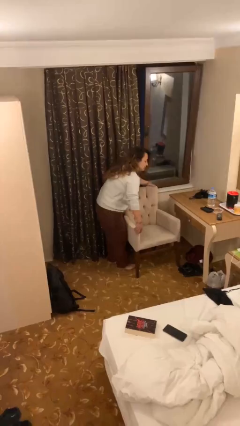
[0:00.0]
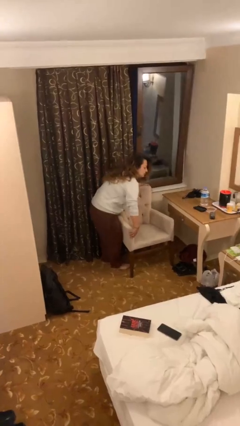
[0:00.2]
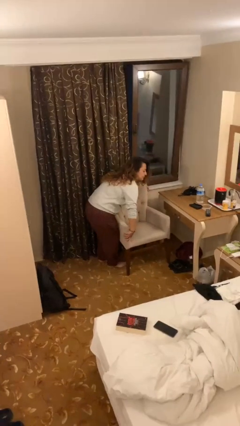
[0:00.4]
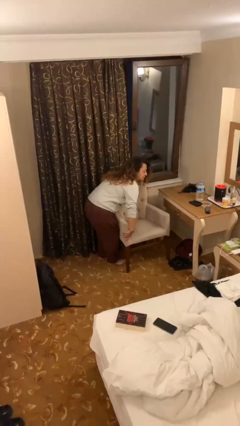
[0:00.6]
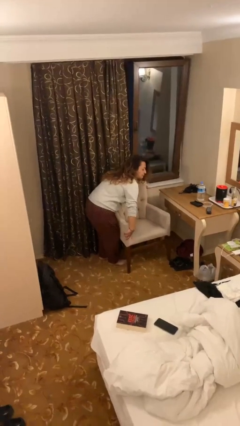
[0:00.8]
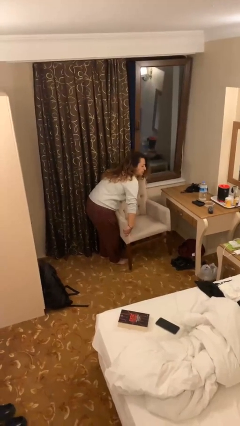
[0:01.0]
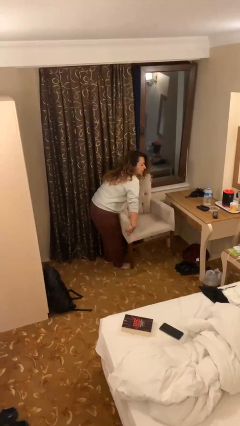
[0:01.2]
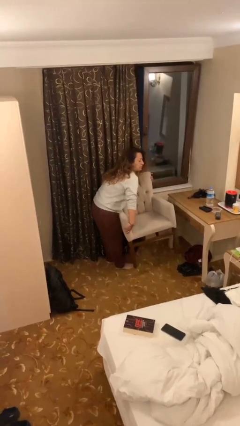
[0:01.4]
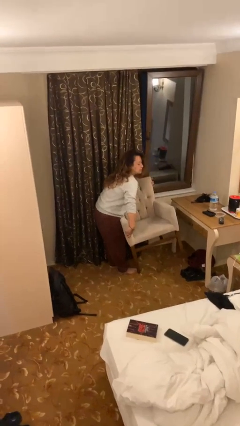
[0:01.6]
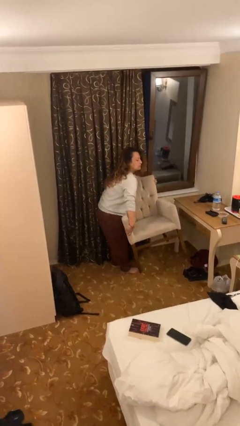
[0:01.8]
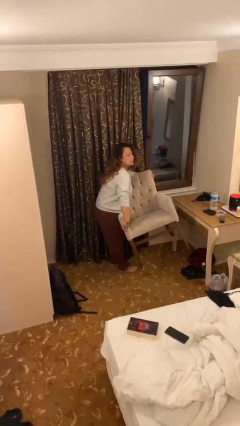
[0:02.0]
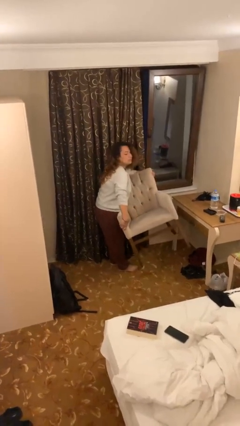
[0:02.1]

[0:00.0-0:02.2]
person picks up object from floor

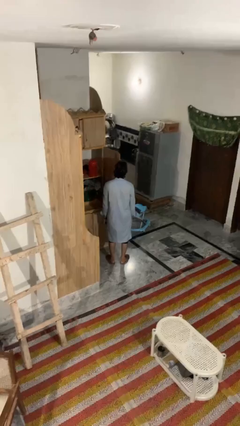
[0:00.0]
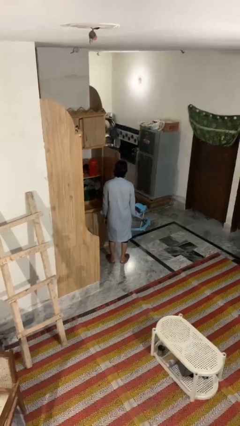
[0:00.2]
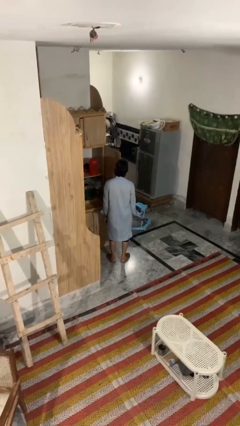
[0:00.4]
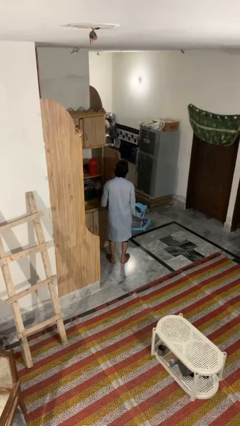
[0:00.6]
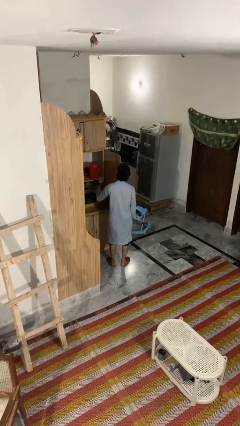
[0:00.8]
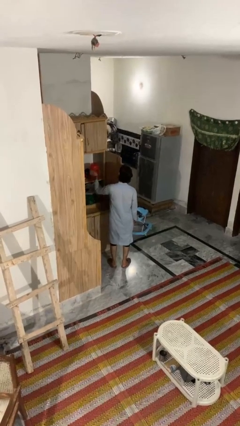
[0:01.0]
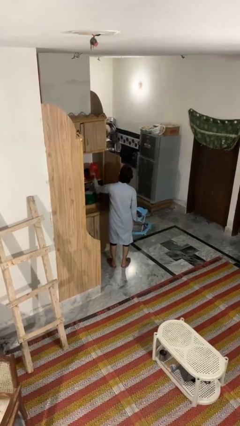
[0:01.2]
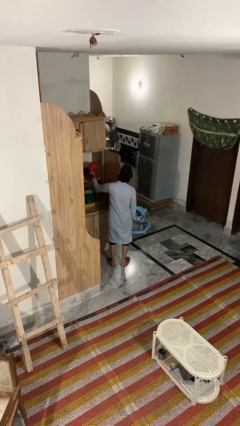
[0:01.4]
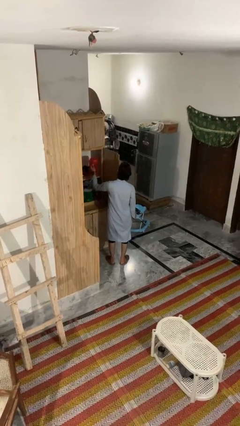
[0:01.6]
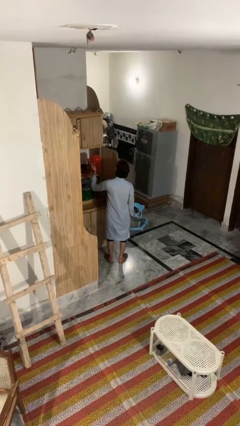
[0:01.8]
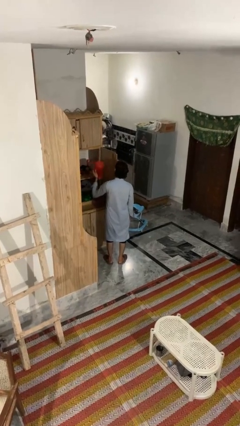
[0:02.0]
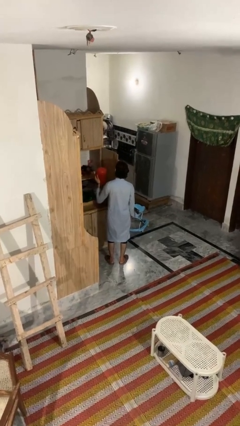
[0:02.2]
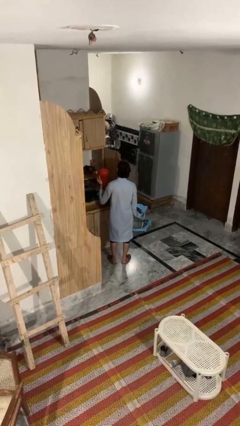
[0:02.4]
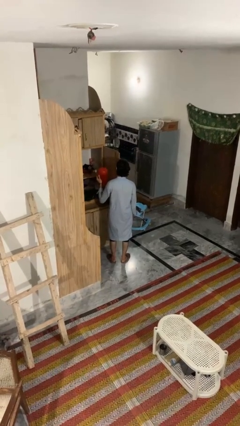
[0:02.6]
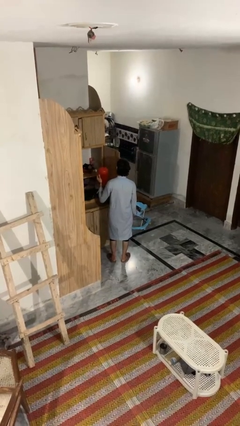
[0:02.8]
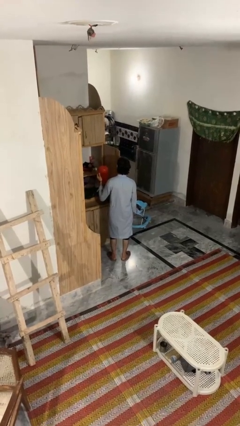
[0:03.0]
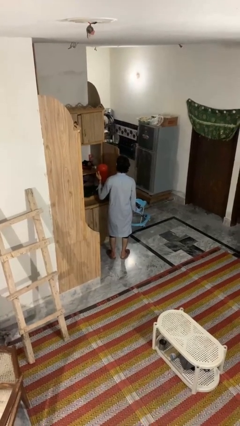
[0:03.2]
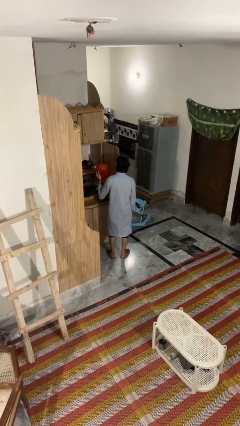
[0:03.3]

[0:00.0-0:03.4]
person picks up object from cabinet

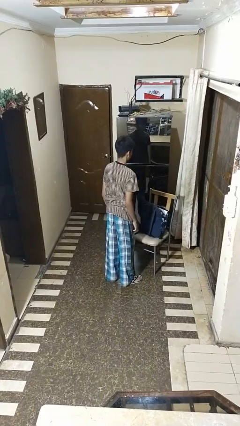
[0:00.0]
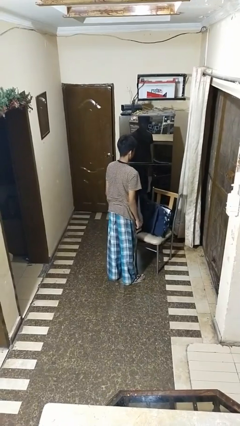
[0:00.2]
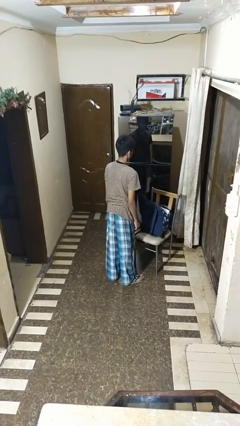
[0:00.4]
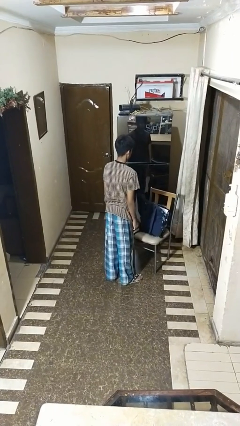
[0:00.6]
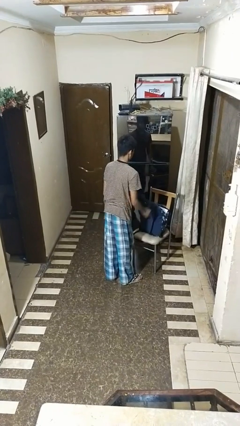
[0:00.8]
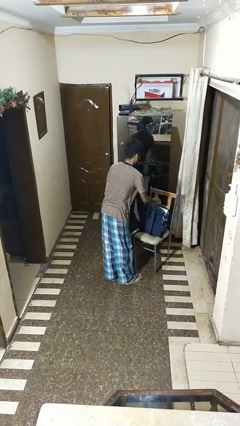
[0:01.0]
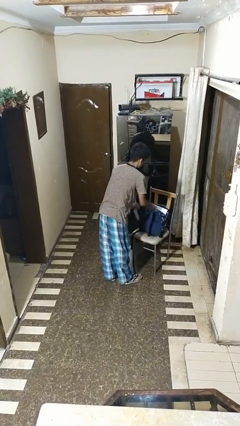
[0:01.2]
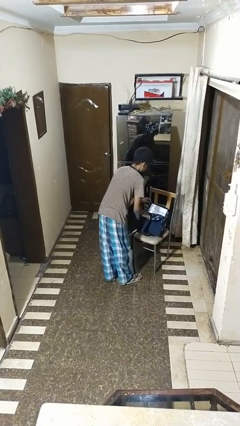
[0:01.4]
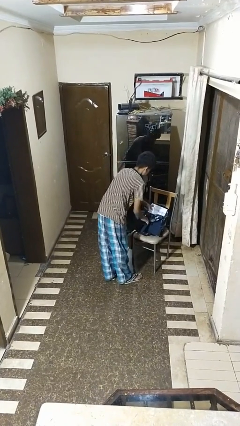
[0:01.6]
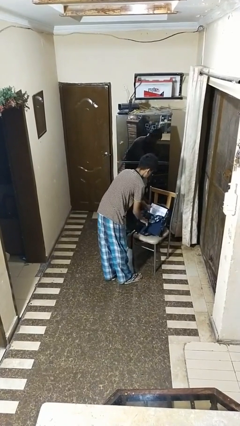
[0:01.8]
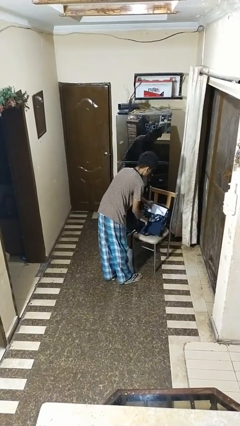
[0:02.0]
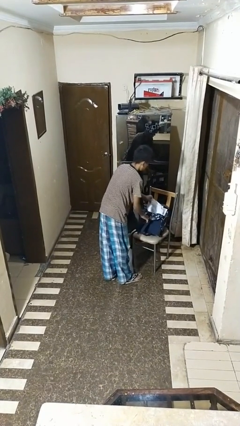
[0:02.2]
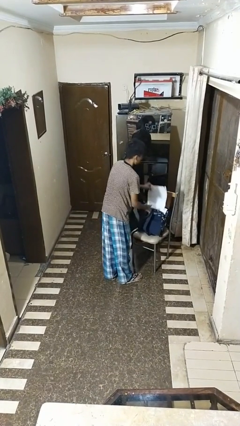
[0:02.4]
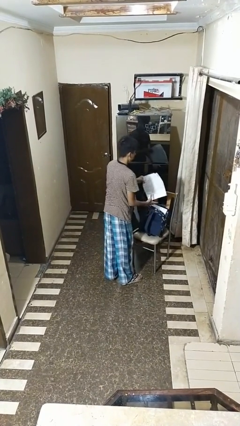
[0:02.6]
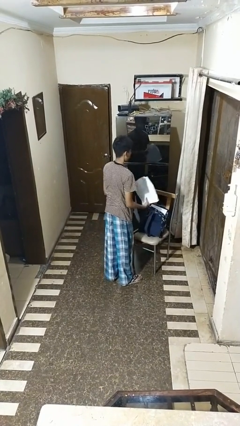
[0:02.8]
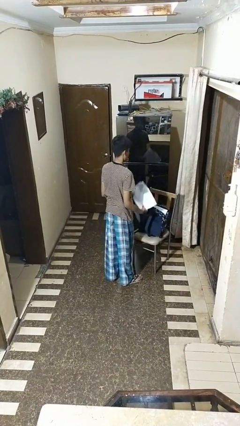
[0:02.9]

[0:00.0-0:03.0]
person takes object from bag

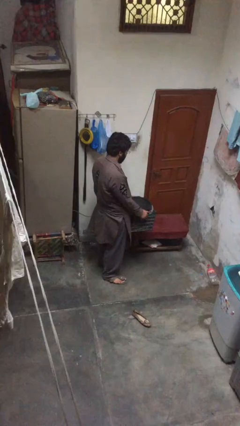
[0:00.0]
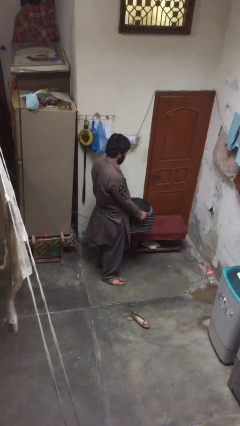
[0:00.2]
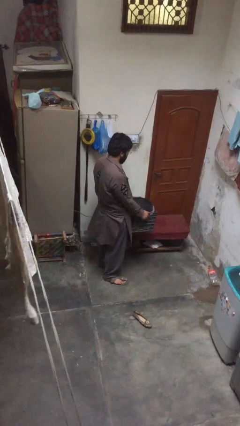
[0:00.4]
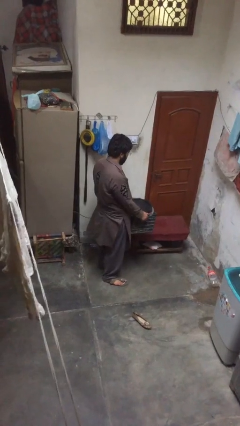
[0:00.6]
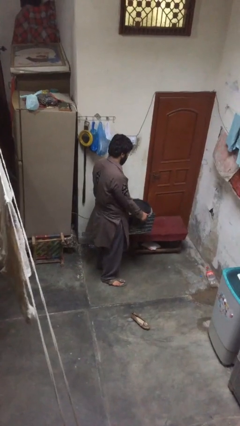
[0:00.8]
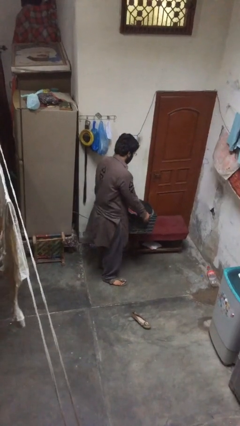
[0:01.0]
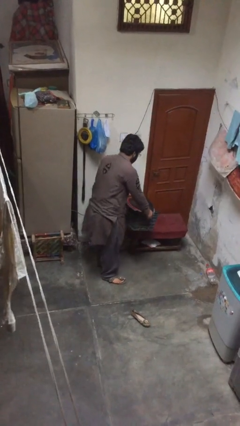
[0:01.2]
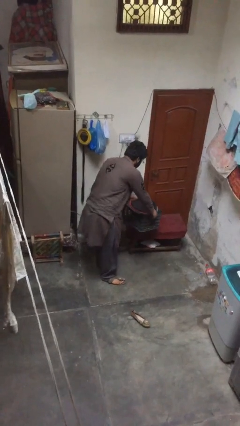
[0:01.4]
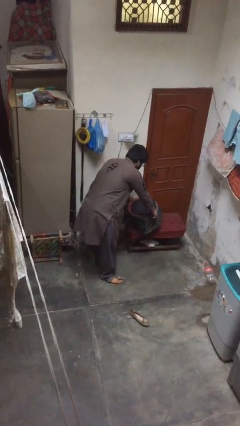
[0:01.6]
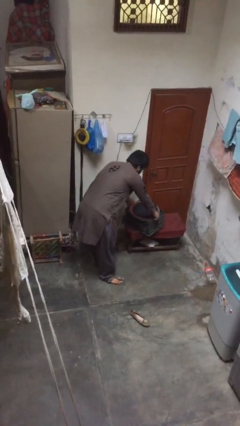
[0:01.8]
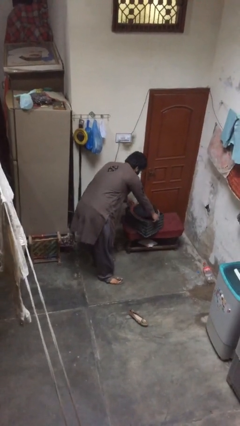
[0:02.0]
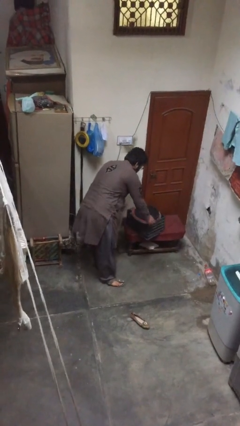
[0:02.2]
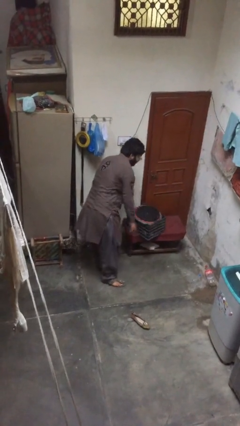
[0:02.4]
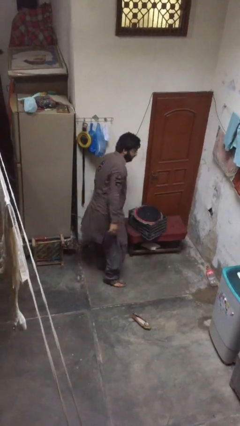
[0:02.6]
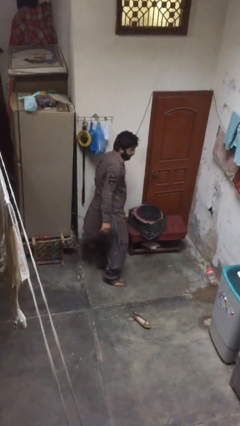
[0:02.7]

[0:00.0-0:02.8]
person puts down object on table

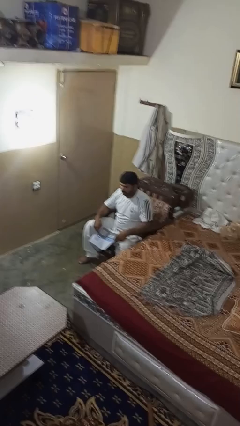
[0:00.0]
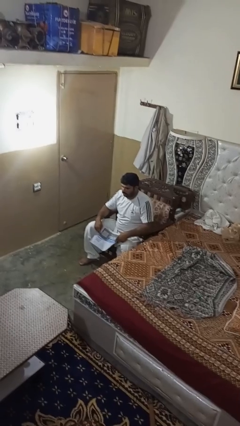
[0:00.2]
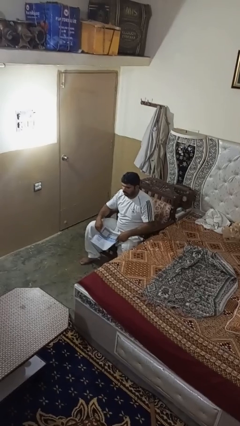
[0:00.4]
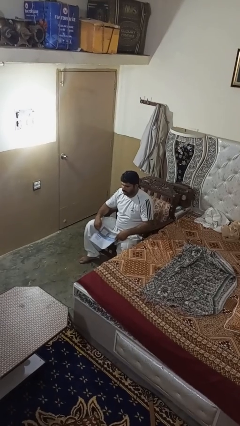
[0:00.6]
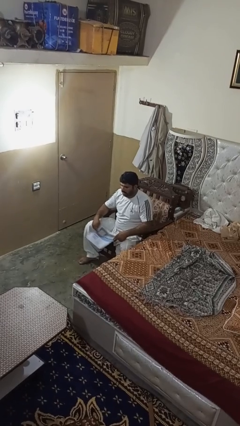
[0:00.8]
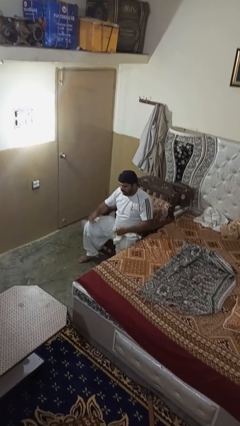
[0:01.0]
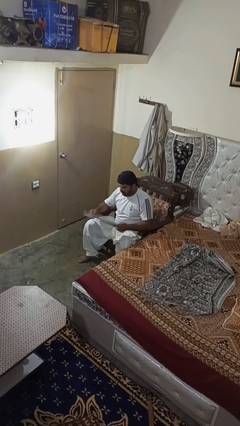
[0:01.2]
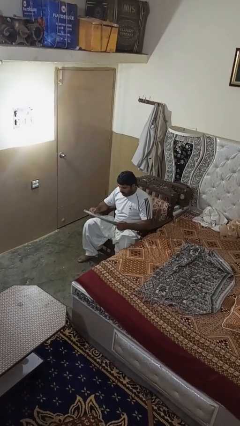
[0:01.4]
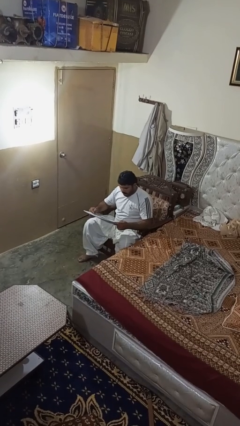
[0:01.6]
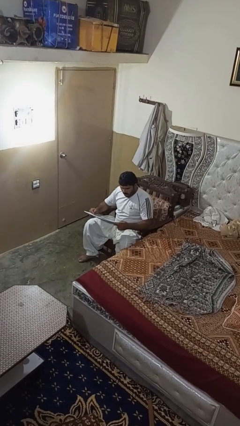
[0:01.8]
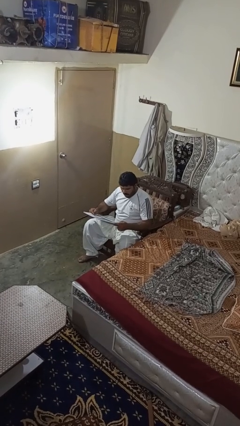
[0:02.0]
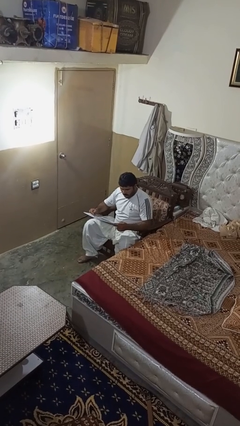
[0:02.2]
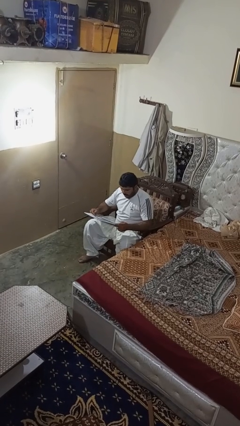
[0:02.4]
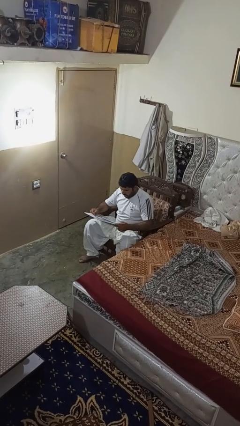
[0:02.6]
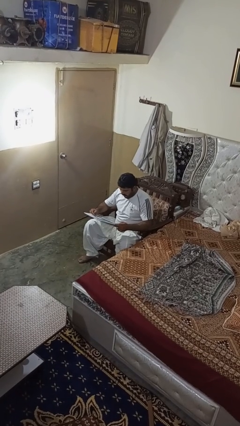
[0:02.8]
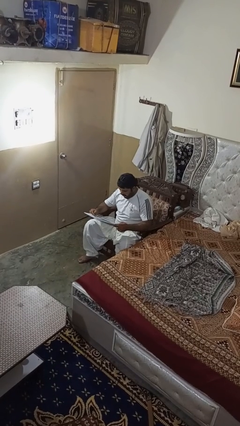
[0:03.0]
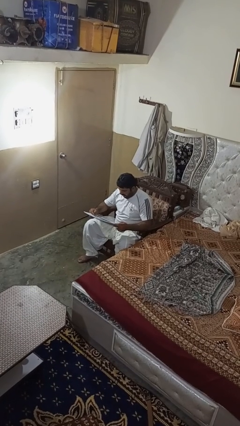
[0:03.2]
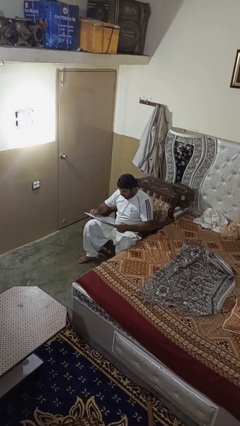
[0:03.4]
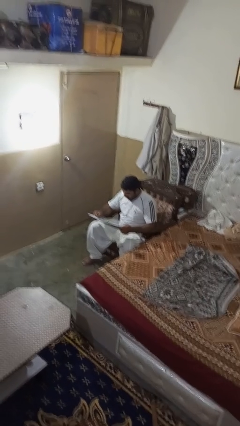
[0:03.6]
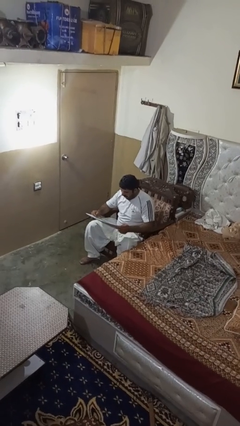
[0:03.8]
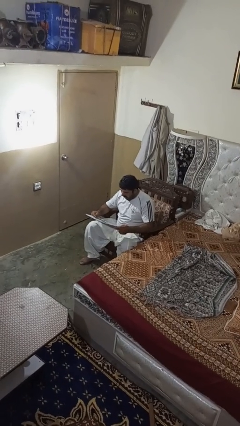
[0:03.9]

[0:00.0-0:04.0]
person reads newspaper

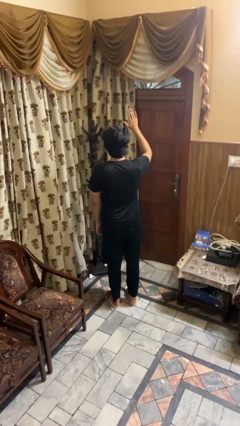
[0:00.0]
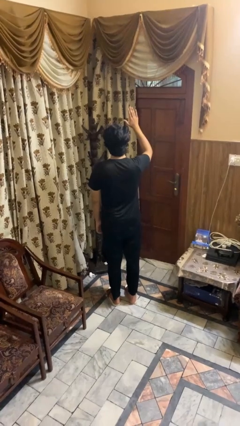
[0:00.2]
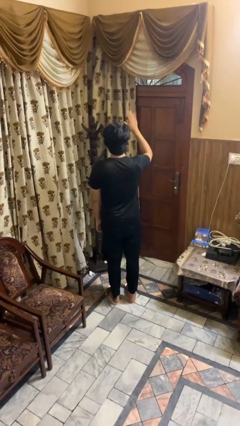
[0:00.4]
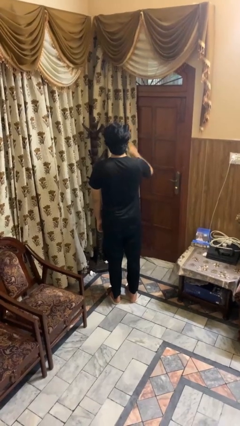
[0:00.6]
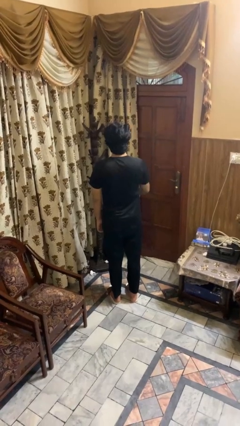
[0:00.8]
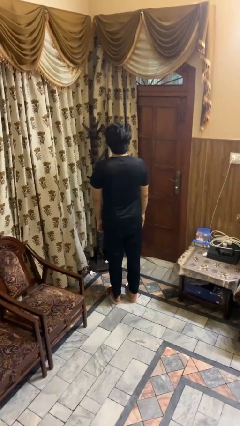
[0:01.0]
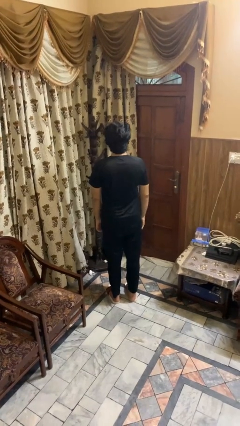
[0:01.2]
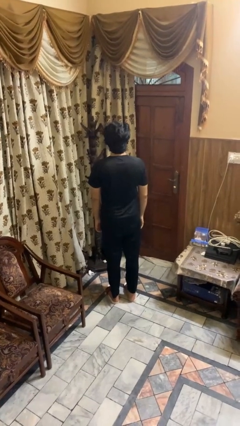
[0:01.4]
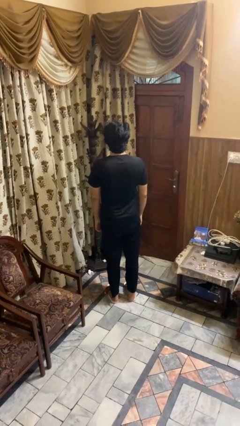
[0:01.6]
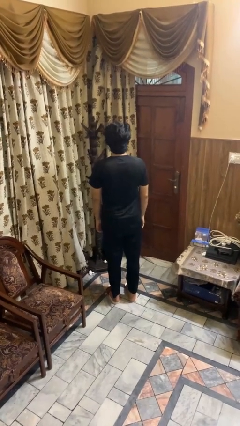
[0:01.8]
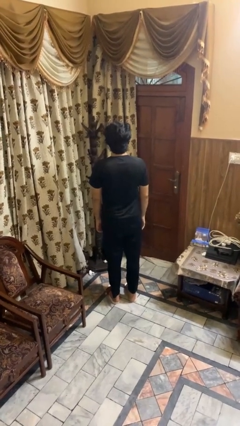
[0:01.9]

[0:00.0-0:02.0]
person gestures lower hand

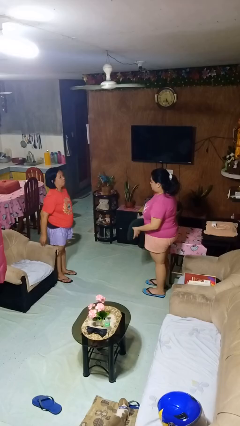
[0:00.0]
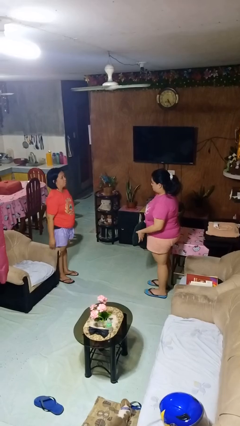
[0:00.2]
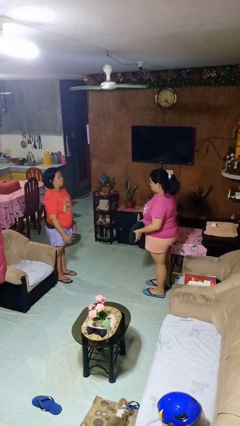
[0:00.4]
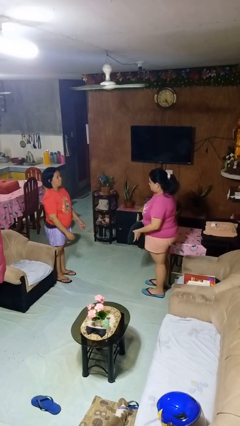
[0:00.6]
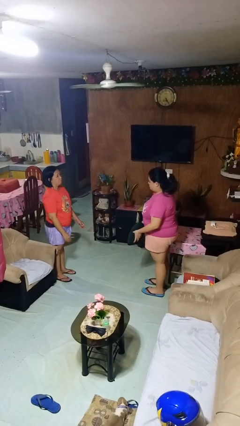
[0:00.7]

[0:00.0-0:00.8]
person catches object from person
